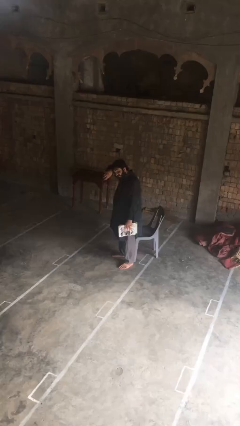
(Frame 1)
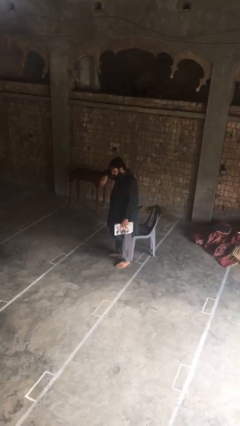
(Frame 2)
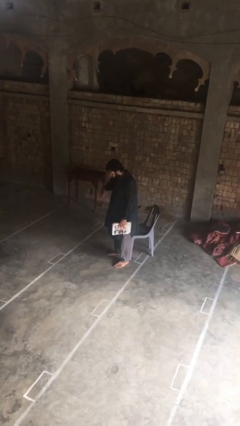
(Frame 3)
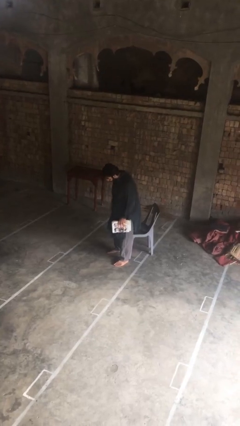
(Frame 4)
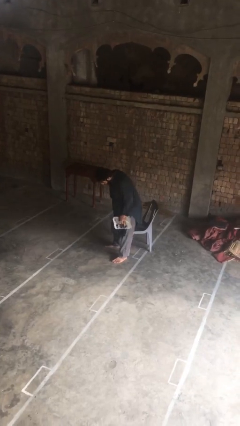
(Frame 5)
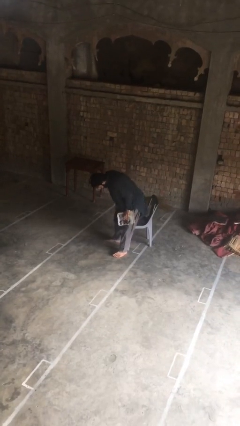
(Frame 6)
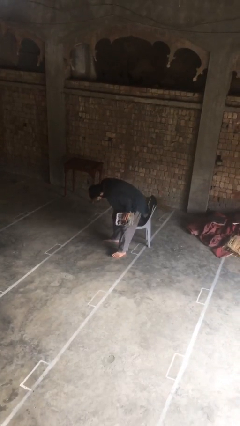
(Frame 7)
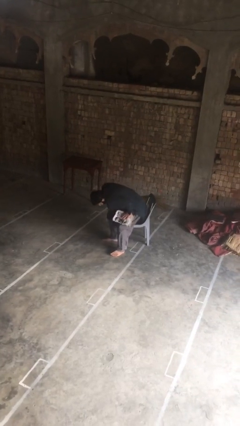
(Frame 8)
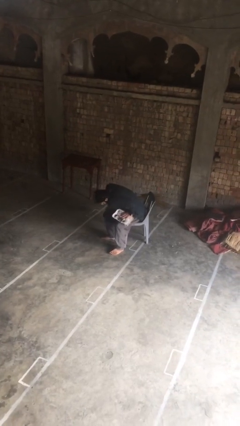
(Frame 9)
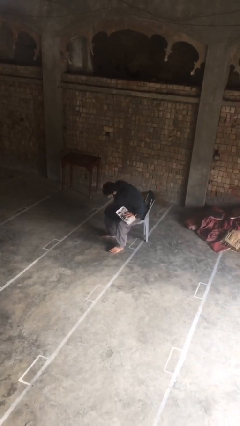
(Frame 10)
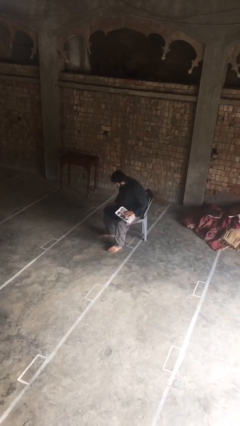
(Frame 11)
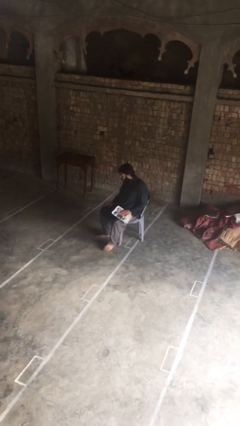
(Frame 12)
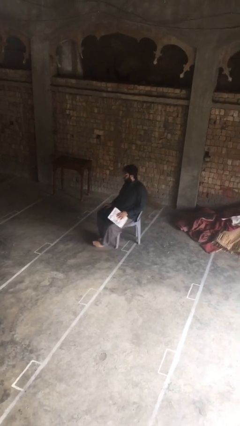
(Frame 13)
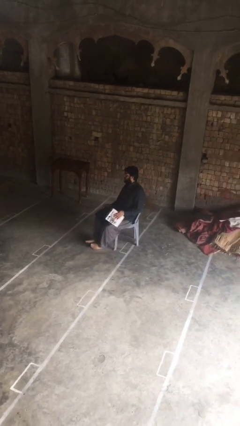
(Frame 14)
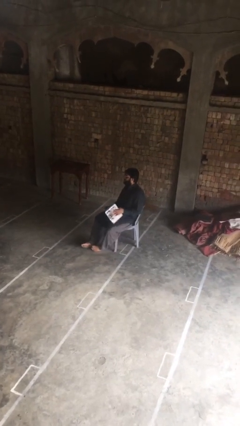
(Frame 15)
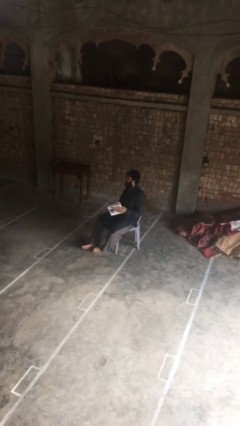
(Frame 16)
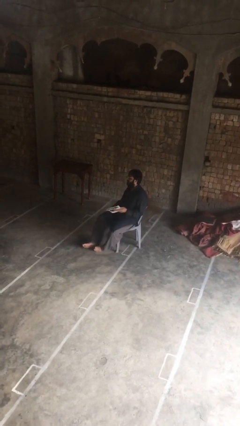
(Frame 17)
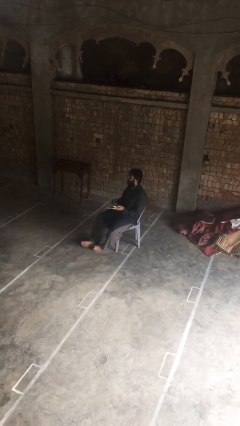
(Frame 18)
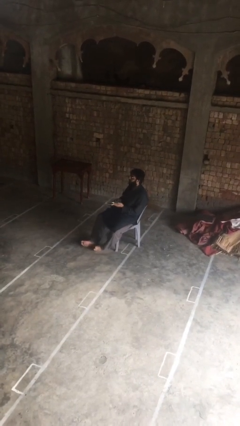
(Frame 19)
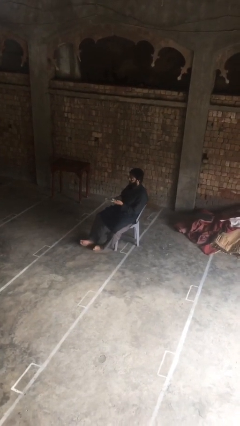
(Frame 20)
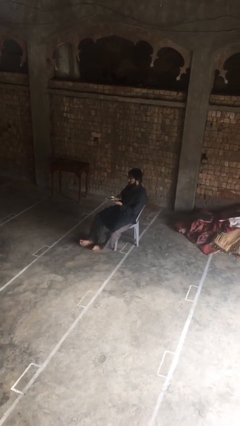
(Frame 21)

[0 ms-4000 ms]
person sits down

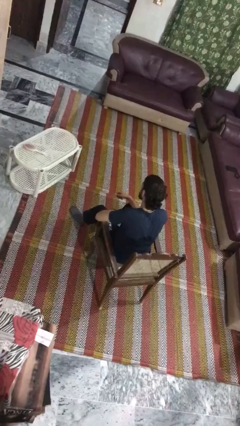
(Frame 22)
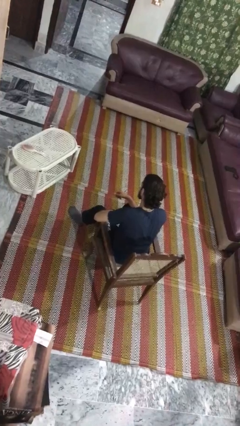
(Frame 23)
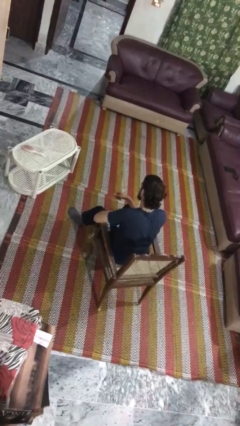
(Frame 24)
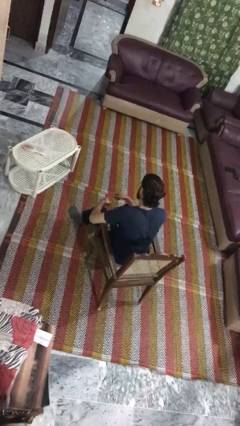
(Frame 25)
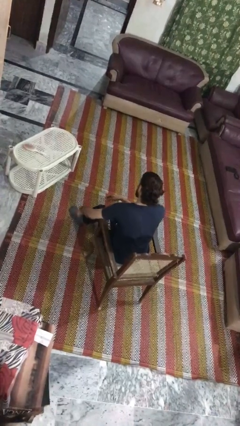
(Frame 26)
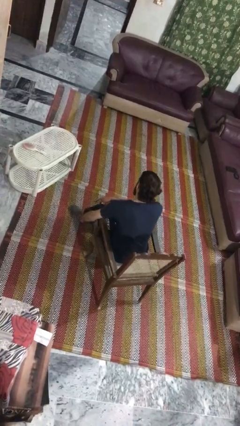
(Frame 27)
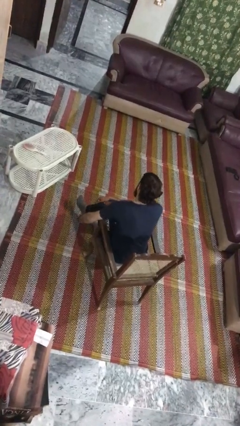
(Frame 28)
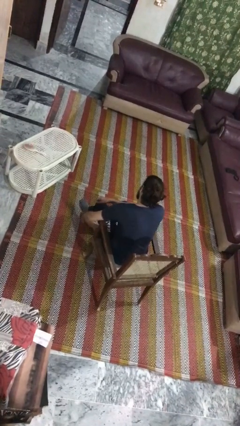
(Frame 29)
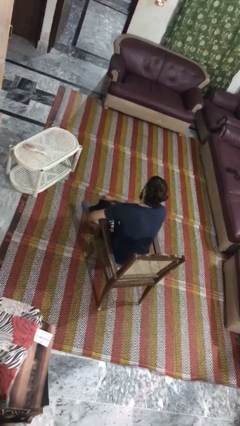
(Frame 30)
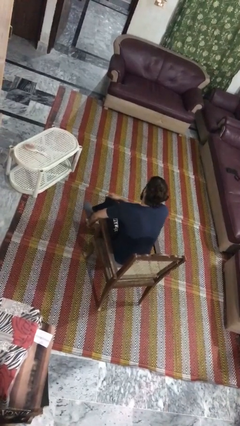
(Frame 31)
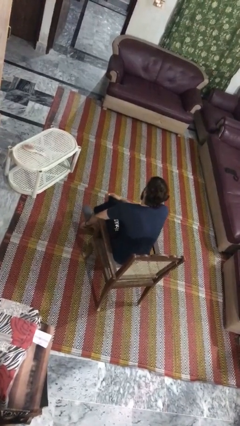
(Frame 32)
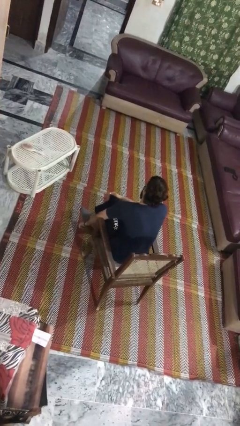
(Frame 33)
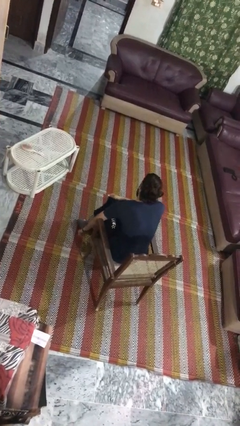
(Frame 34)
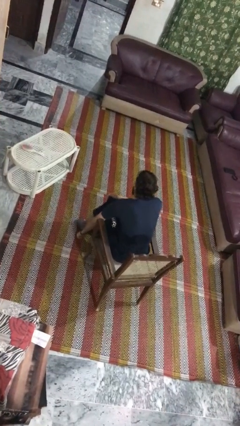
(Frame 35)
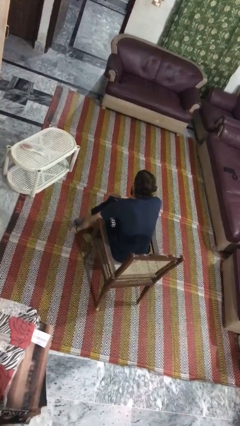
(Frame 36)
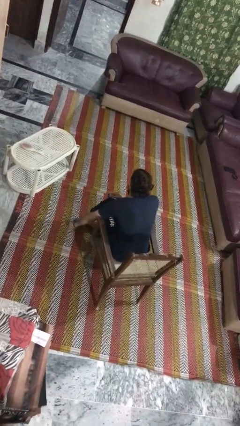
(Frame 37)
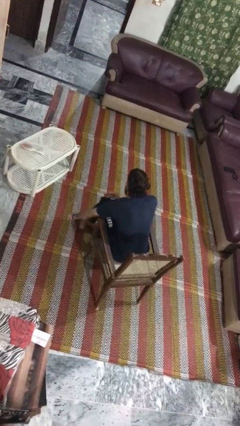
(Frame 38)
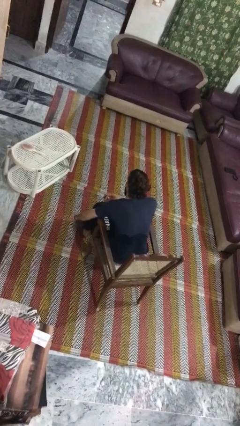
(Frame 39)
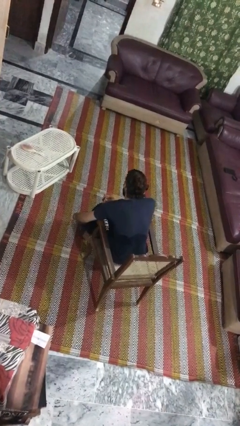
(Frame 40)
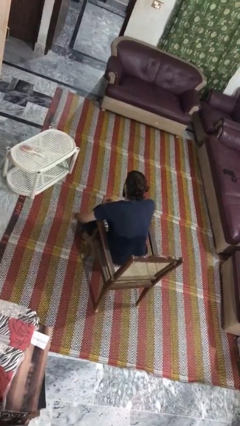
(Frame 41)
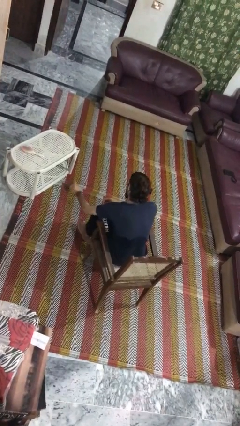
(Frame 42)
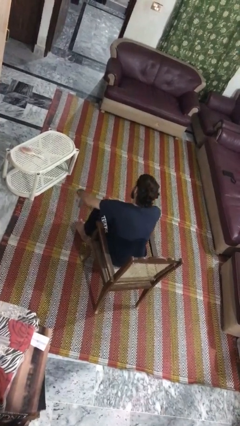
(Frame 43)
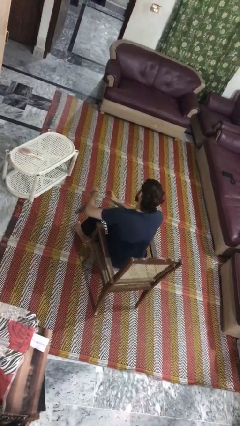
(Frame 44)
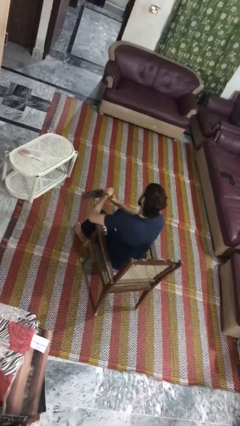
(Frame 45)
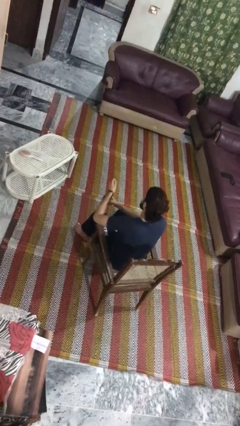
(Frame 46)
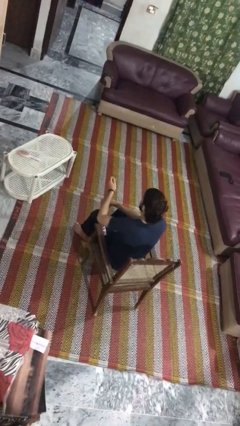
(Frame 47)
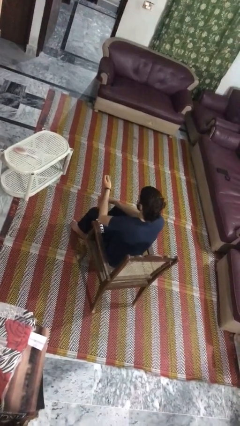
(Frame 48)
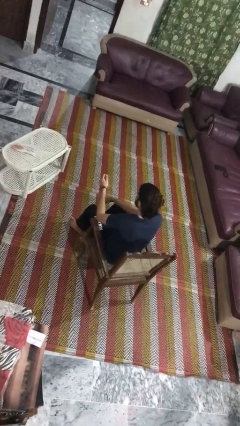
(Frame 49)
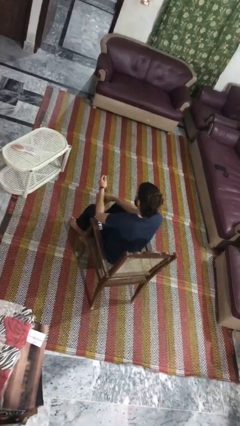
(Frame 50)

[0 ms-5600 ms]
person takes off socks

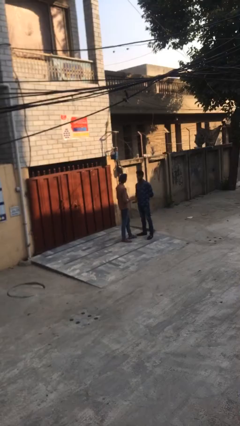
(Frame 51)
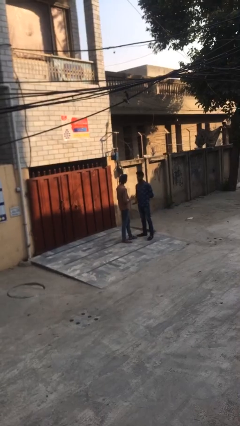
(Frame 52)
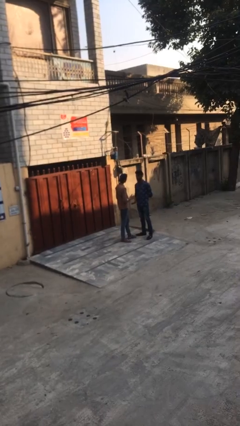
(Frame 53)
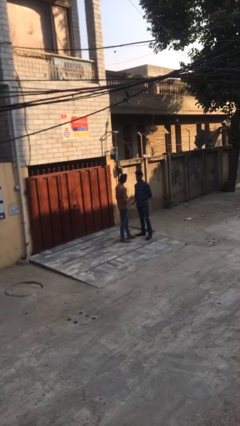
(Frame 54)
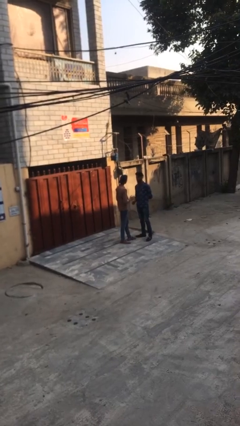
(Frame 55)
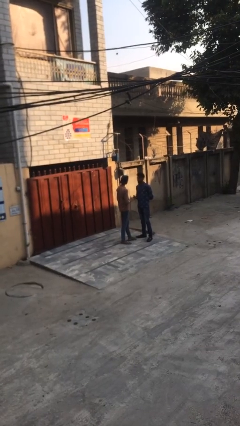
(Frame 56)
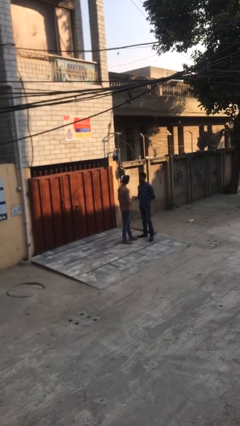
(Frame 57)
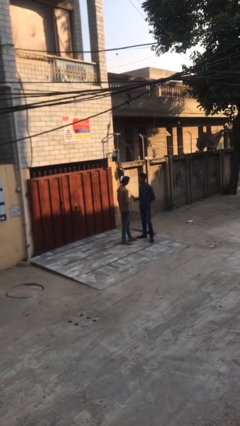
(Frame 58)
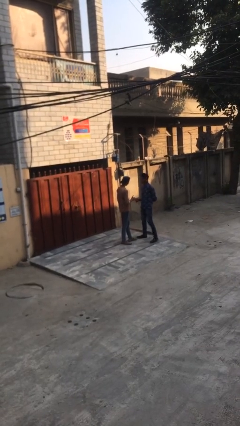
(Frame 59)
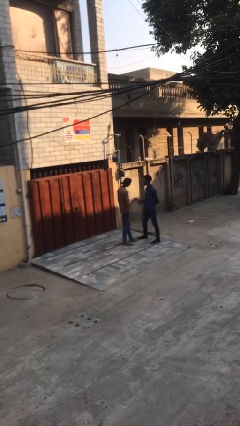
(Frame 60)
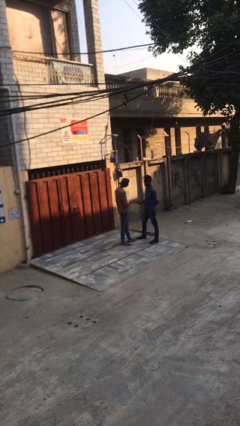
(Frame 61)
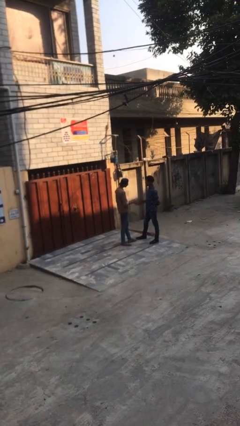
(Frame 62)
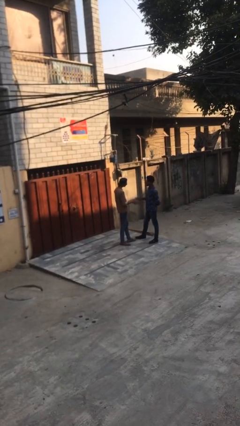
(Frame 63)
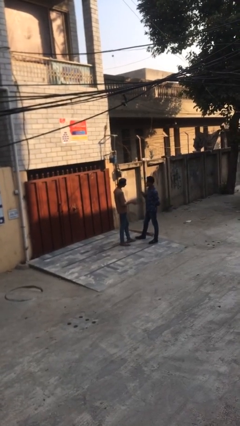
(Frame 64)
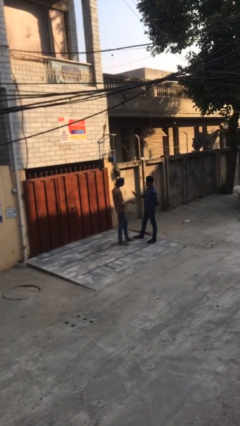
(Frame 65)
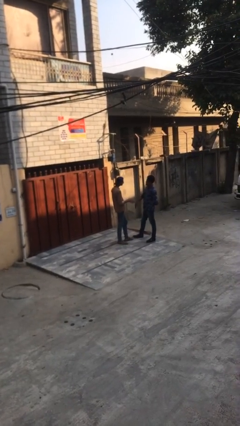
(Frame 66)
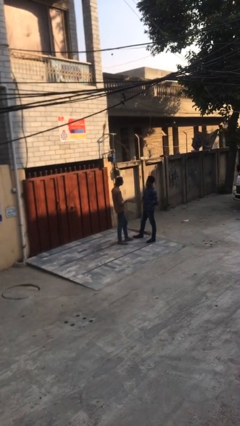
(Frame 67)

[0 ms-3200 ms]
person talks to person

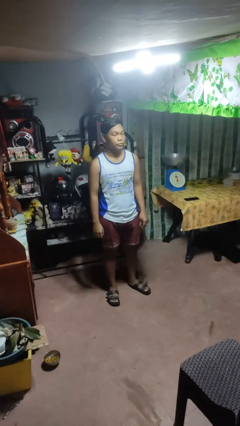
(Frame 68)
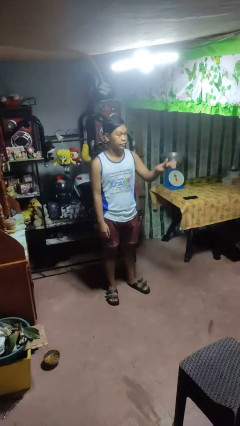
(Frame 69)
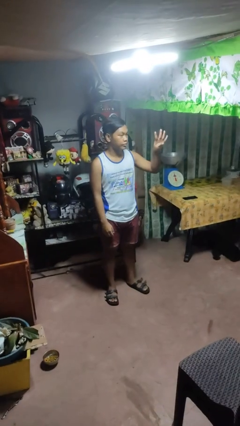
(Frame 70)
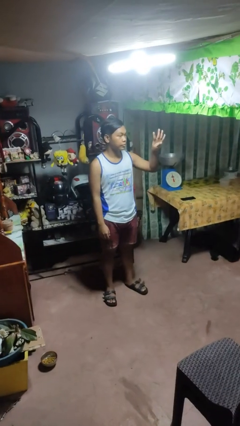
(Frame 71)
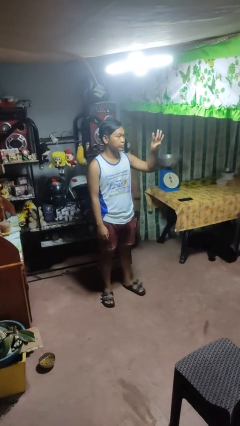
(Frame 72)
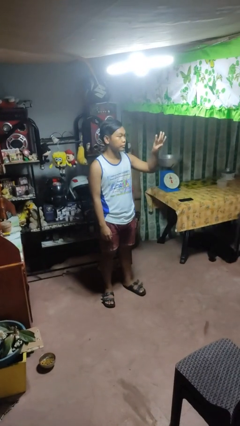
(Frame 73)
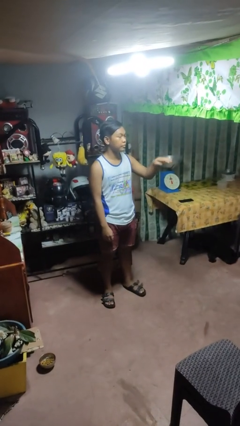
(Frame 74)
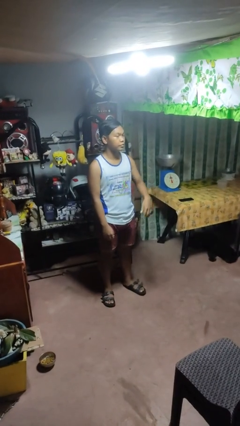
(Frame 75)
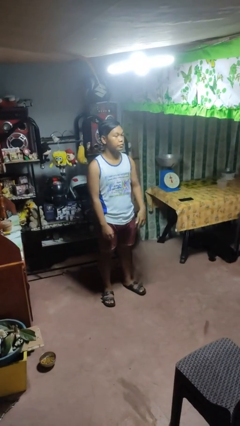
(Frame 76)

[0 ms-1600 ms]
person gestures number four

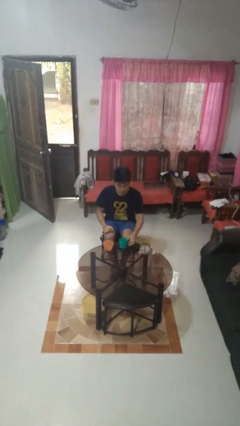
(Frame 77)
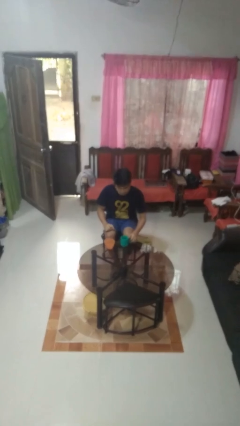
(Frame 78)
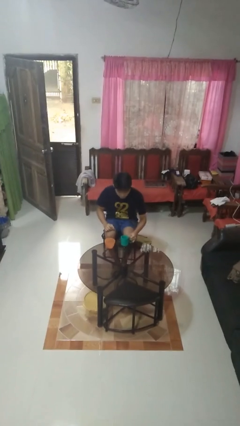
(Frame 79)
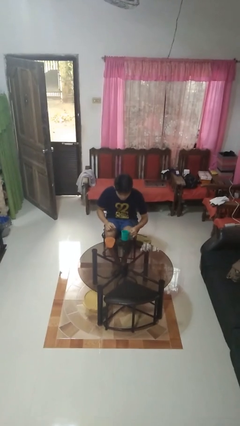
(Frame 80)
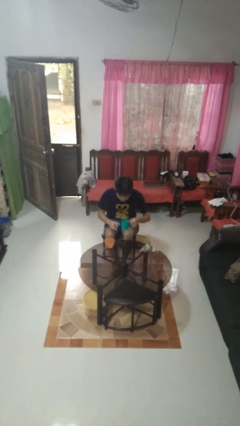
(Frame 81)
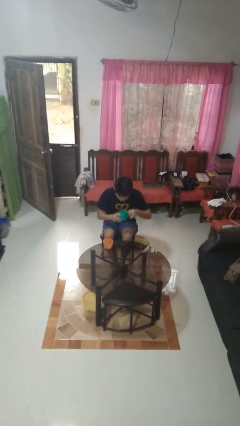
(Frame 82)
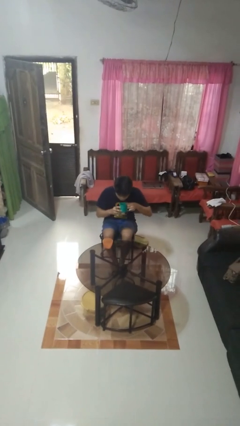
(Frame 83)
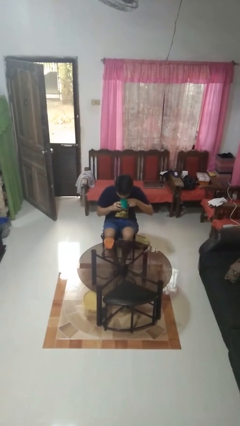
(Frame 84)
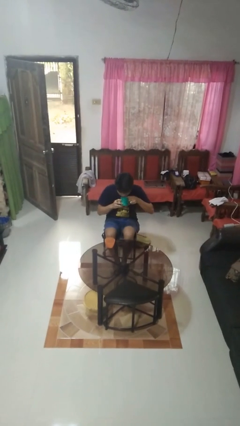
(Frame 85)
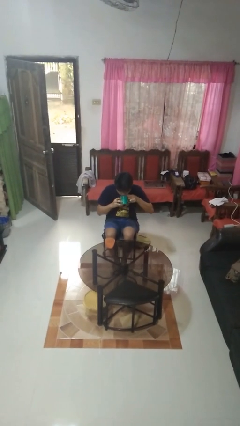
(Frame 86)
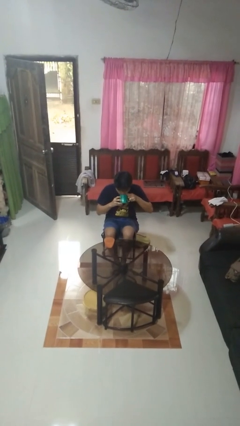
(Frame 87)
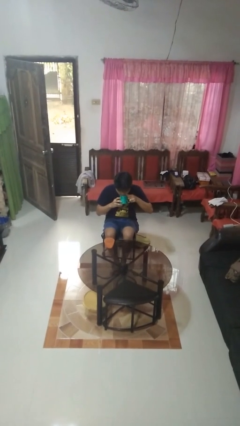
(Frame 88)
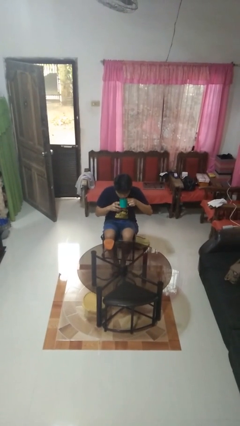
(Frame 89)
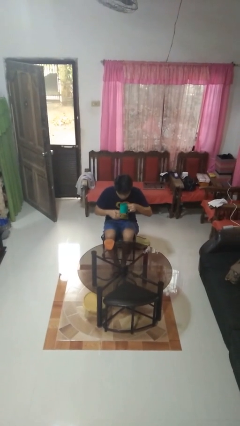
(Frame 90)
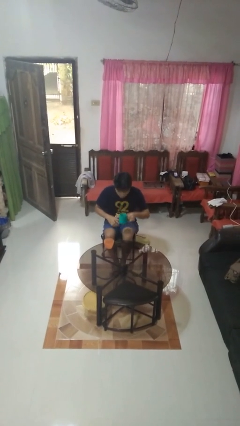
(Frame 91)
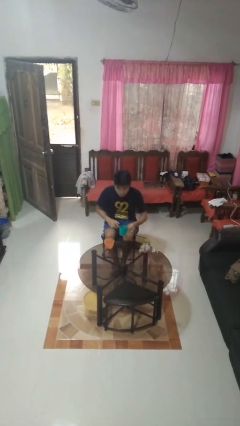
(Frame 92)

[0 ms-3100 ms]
person drinks from cup

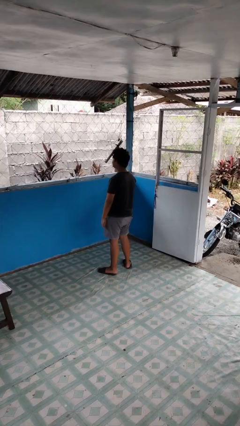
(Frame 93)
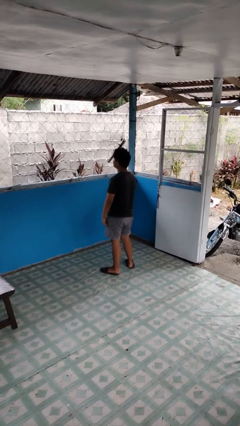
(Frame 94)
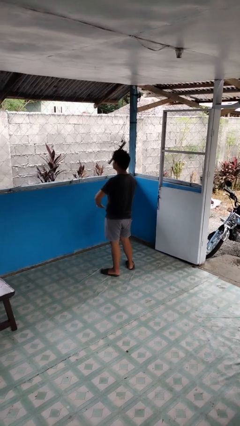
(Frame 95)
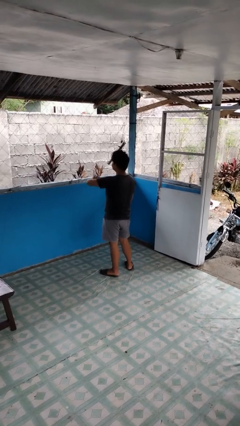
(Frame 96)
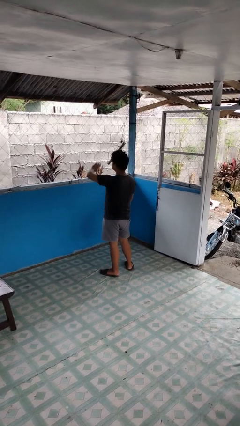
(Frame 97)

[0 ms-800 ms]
person gestures swipe up
